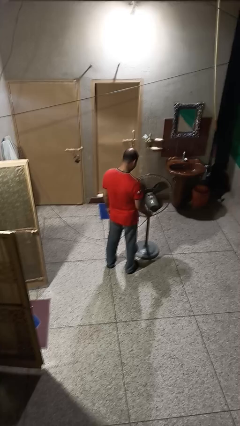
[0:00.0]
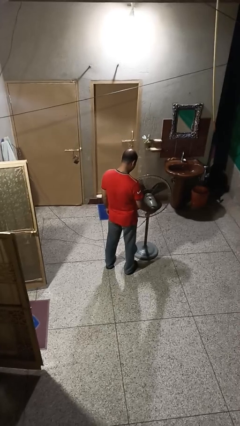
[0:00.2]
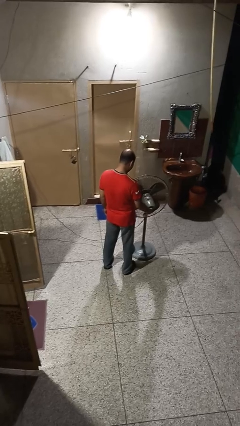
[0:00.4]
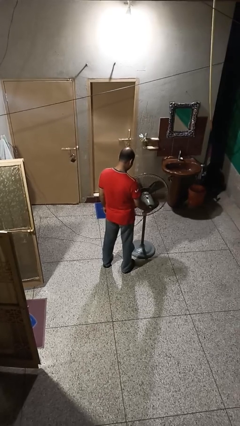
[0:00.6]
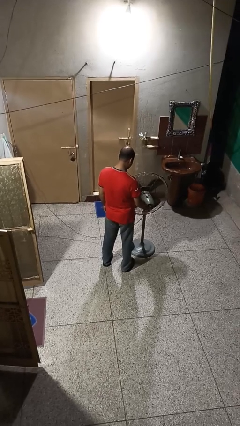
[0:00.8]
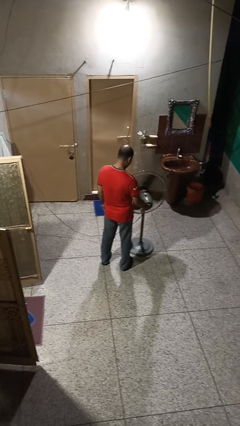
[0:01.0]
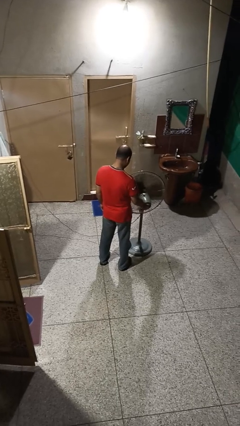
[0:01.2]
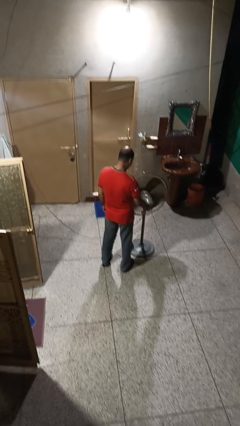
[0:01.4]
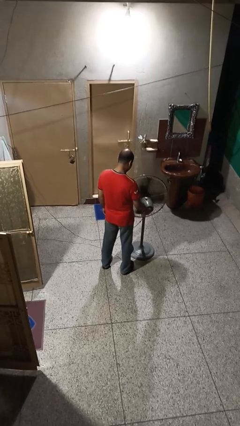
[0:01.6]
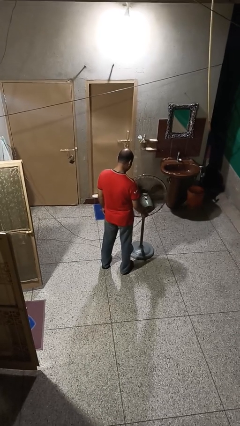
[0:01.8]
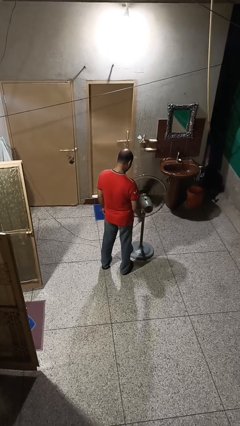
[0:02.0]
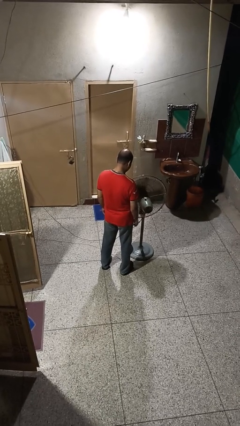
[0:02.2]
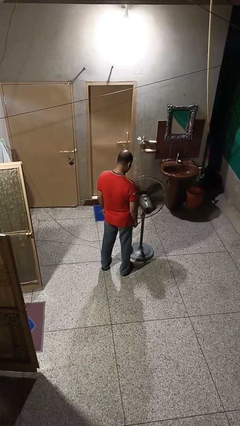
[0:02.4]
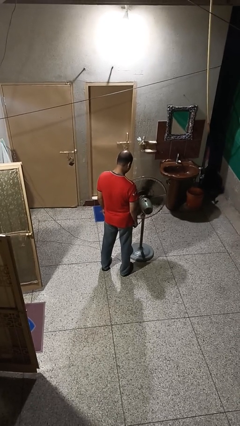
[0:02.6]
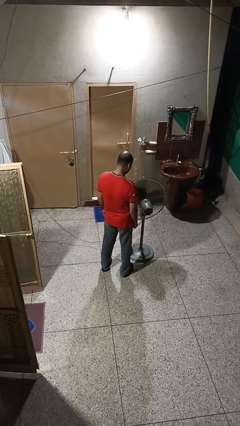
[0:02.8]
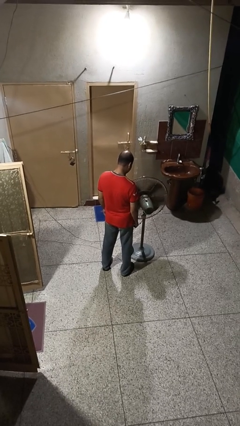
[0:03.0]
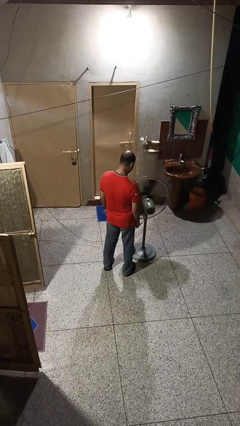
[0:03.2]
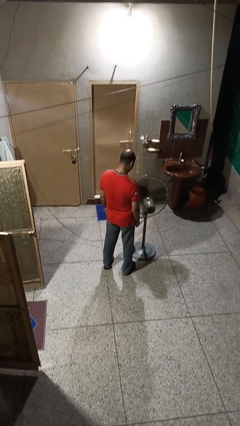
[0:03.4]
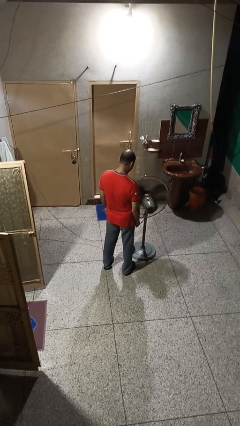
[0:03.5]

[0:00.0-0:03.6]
person turns on fan

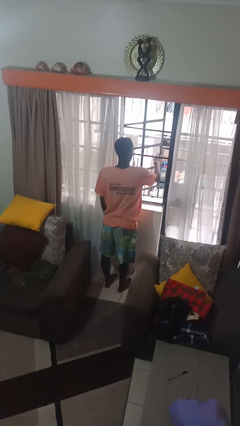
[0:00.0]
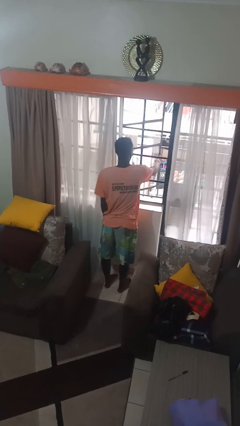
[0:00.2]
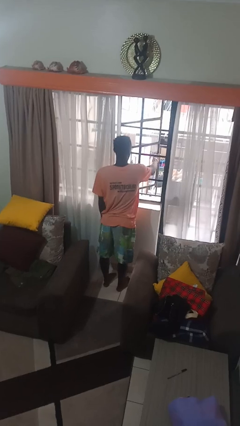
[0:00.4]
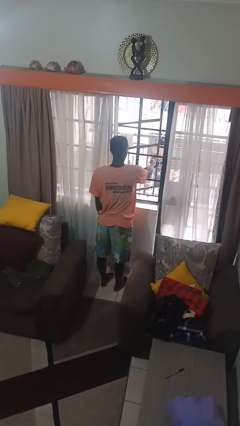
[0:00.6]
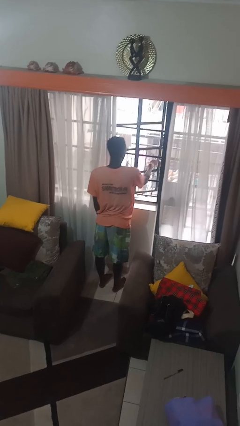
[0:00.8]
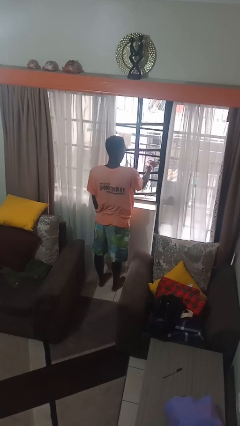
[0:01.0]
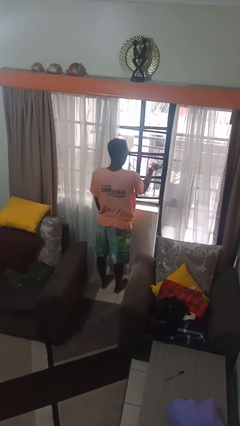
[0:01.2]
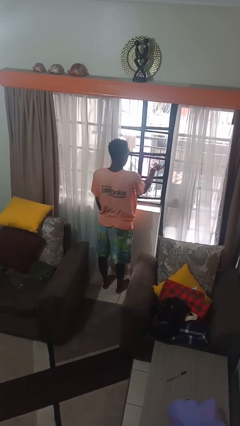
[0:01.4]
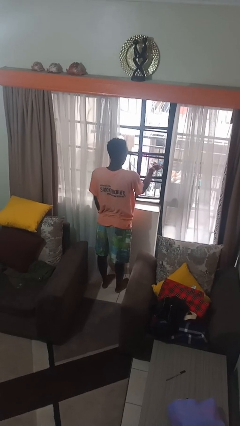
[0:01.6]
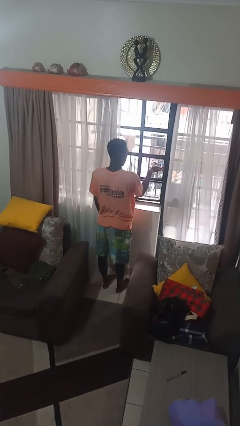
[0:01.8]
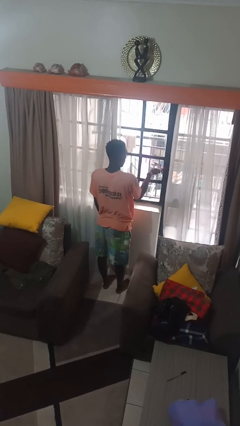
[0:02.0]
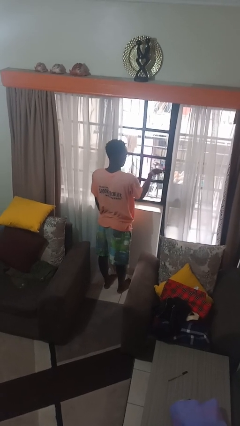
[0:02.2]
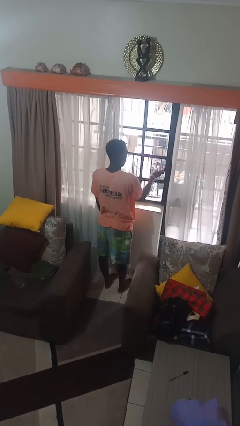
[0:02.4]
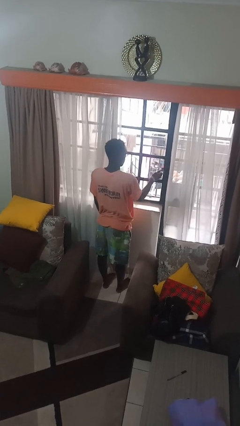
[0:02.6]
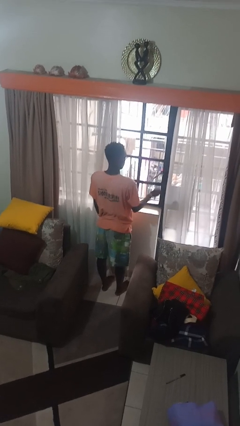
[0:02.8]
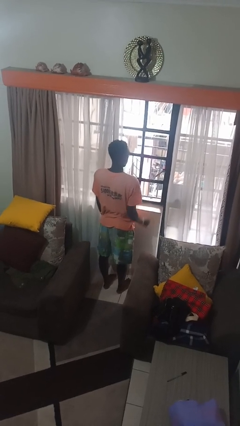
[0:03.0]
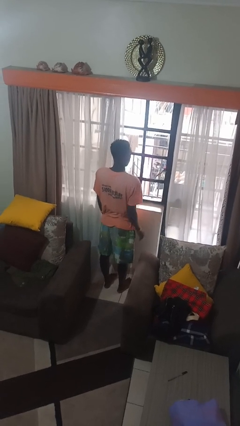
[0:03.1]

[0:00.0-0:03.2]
person closes home window

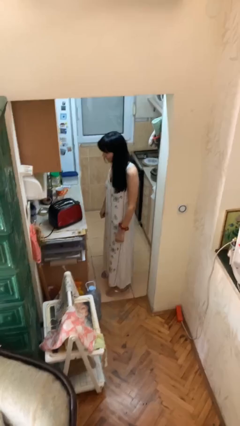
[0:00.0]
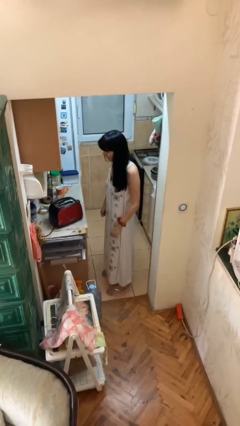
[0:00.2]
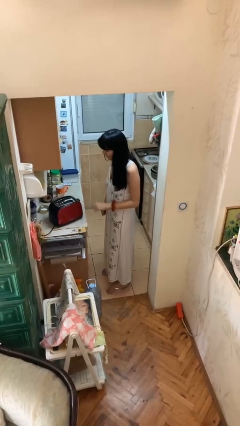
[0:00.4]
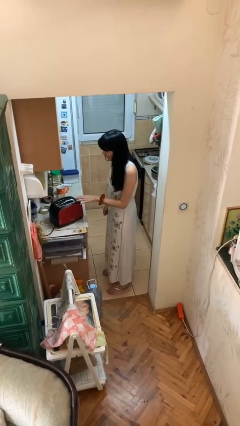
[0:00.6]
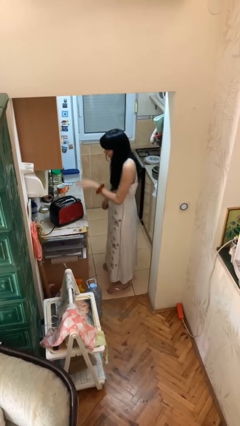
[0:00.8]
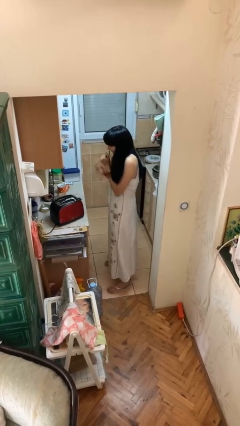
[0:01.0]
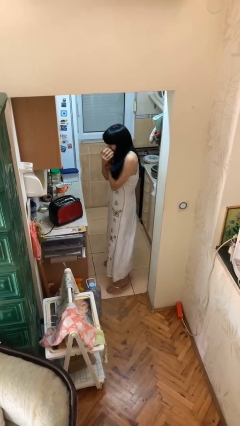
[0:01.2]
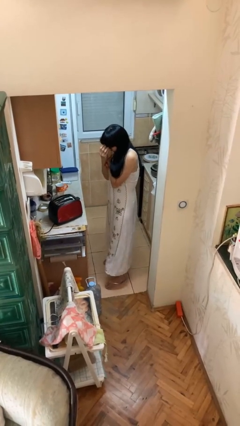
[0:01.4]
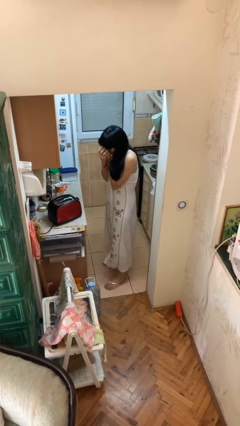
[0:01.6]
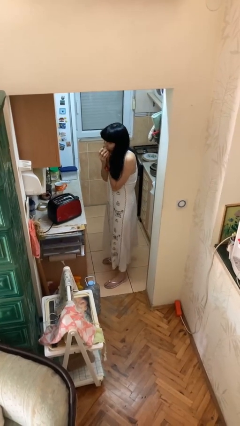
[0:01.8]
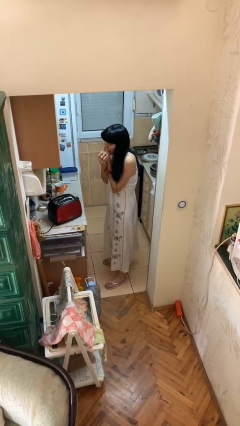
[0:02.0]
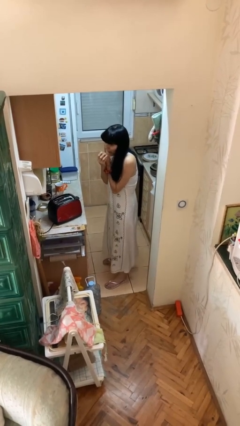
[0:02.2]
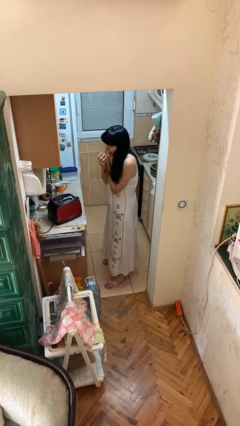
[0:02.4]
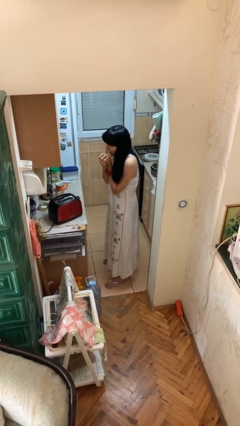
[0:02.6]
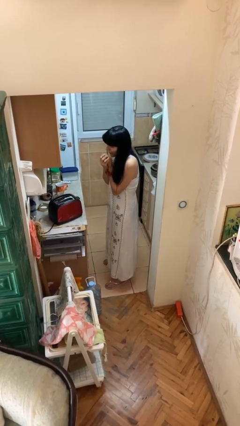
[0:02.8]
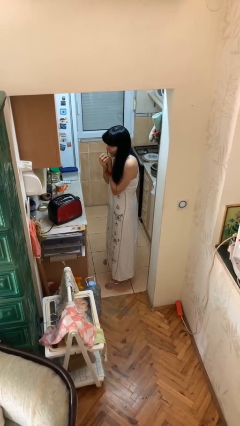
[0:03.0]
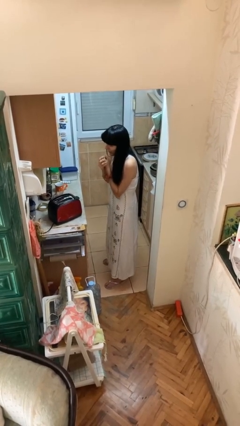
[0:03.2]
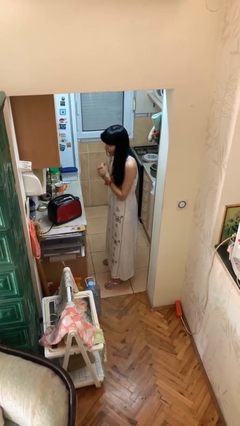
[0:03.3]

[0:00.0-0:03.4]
person burns hand

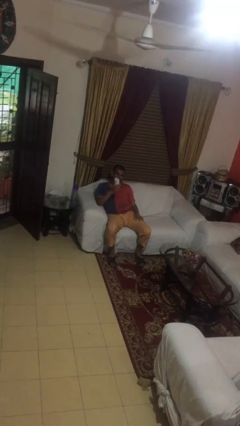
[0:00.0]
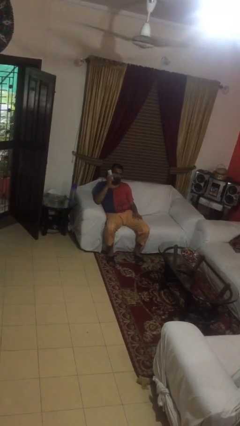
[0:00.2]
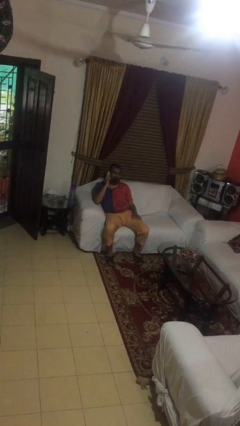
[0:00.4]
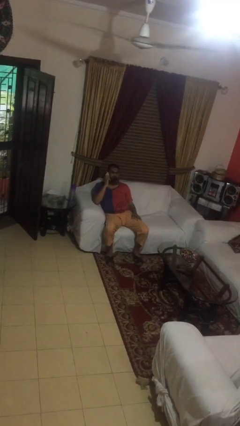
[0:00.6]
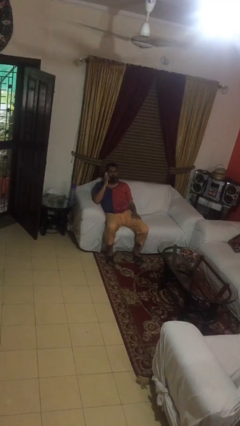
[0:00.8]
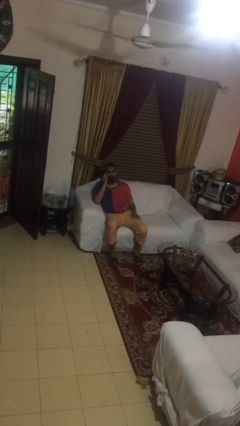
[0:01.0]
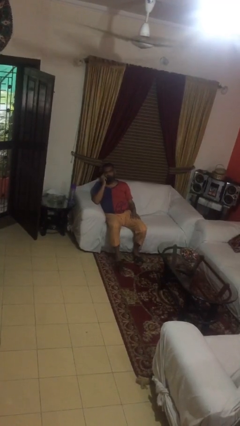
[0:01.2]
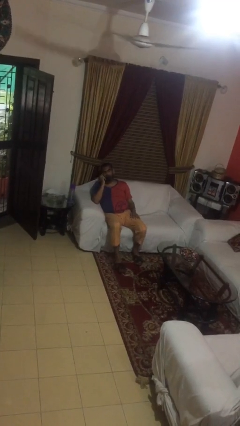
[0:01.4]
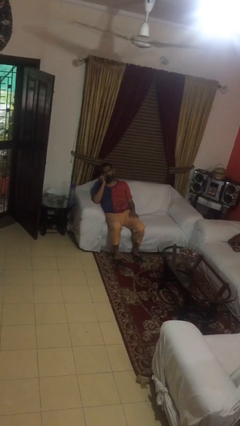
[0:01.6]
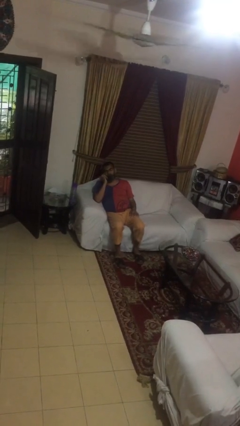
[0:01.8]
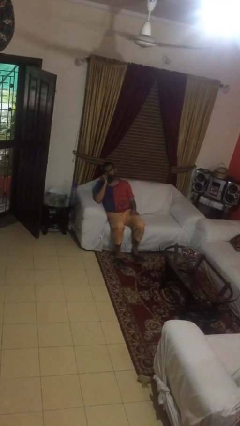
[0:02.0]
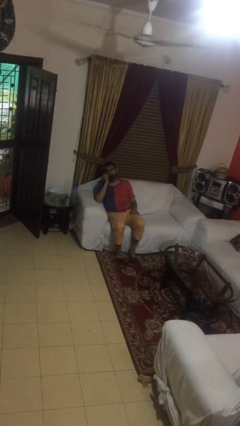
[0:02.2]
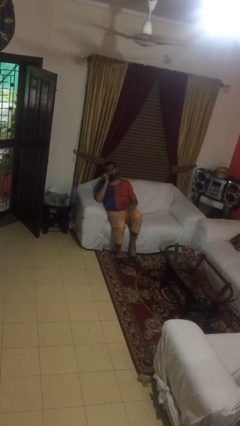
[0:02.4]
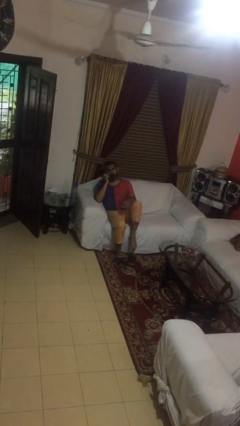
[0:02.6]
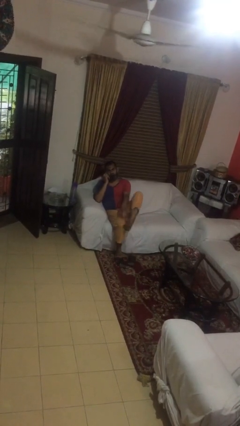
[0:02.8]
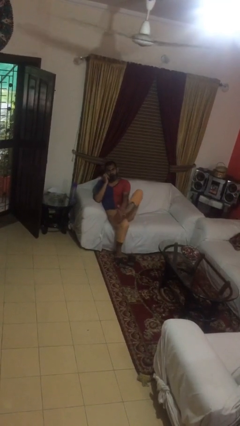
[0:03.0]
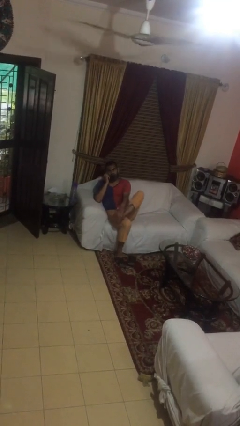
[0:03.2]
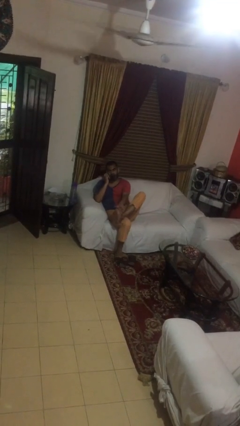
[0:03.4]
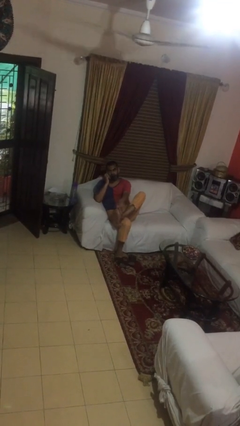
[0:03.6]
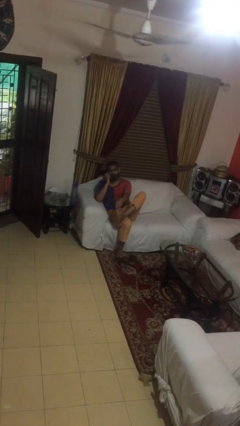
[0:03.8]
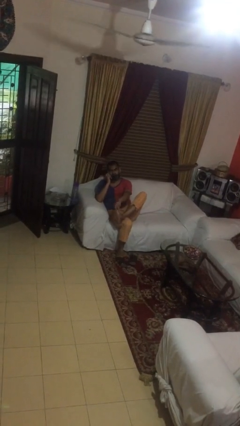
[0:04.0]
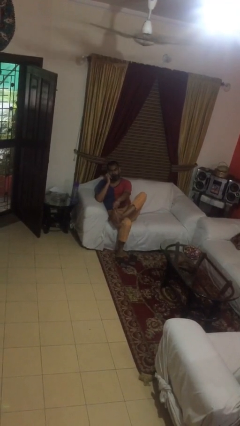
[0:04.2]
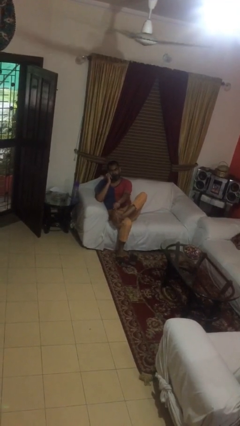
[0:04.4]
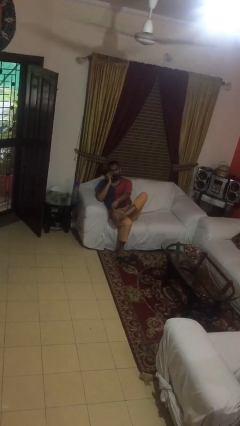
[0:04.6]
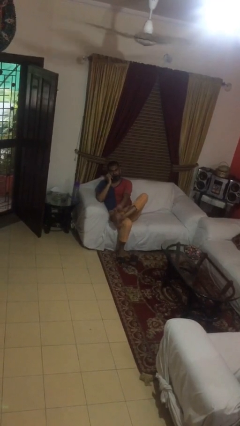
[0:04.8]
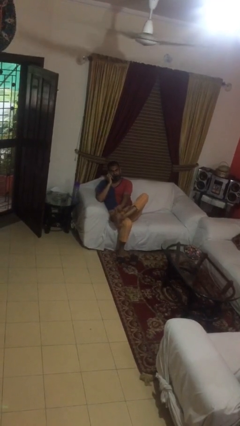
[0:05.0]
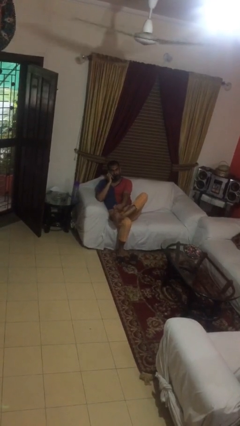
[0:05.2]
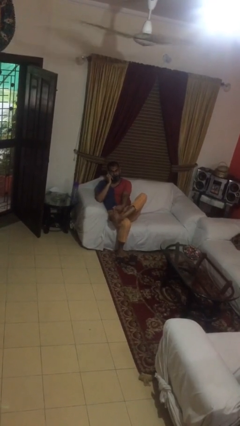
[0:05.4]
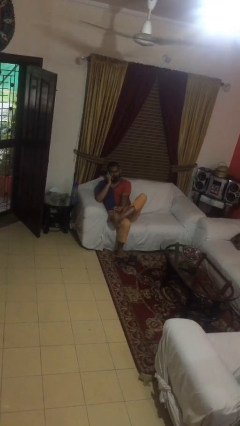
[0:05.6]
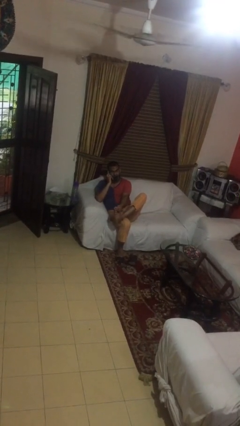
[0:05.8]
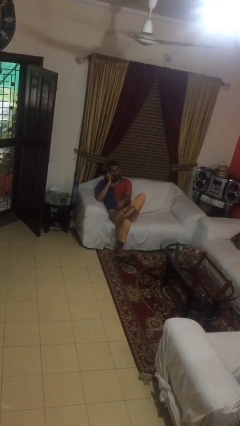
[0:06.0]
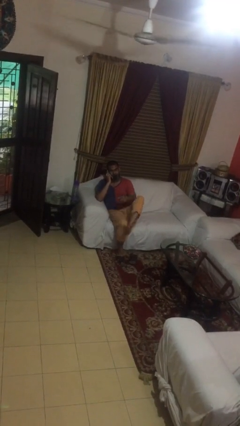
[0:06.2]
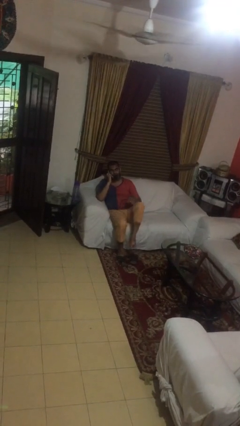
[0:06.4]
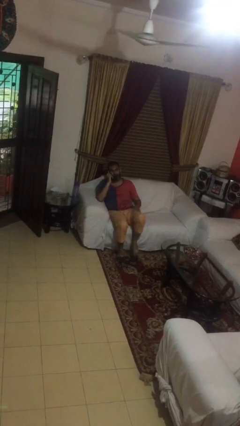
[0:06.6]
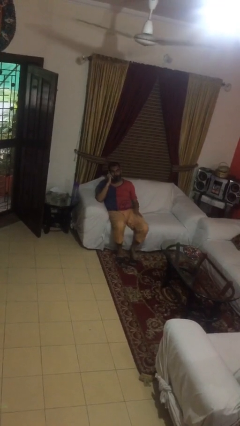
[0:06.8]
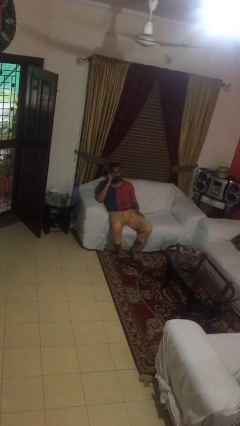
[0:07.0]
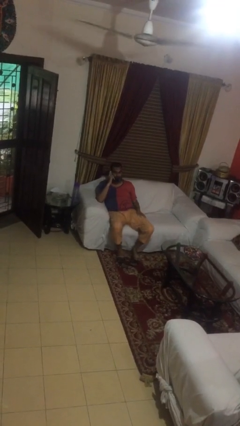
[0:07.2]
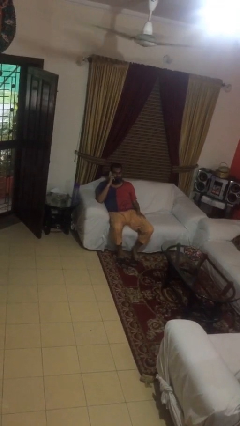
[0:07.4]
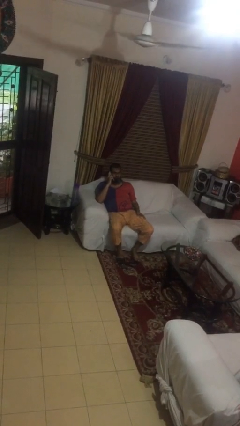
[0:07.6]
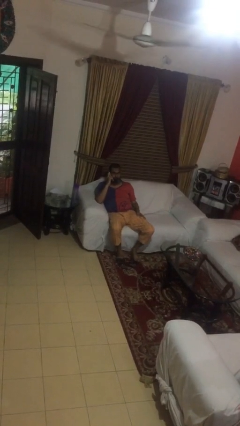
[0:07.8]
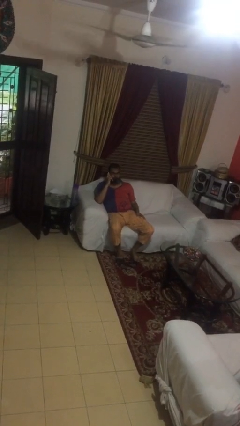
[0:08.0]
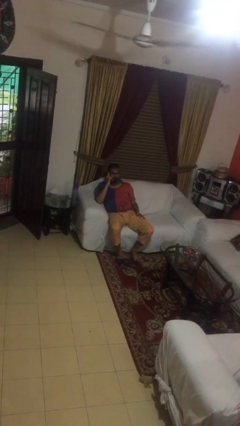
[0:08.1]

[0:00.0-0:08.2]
person talks on phone
